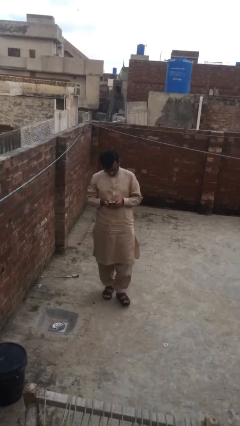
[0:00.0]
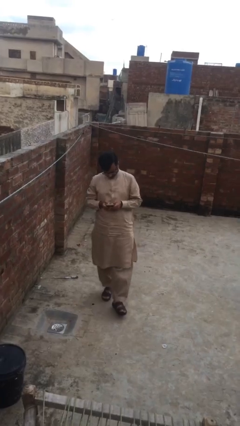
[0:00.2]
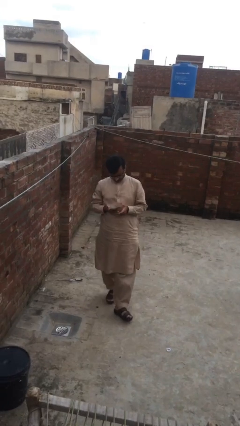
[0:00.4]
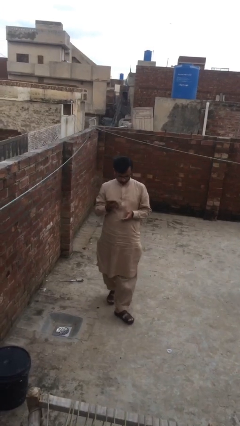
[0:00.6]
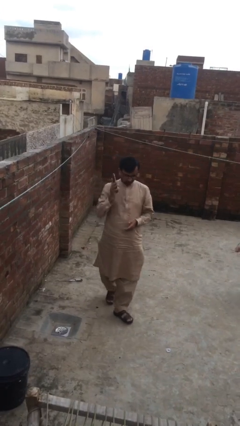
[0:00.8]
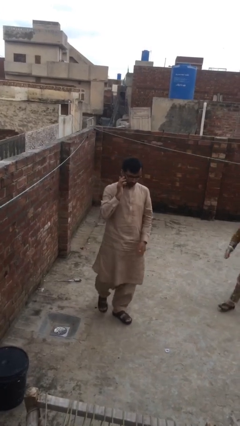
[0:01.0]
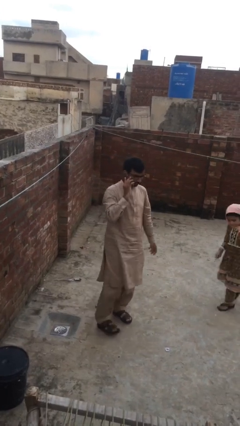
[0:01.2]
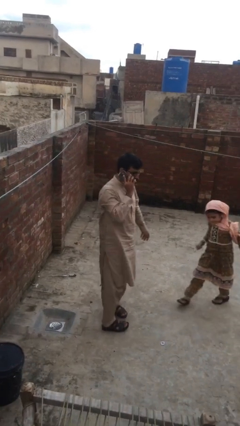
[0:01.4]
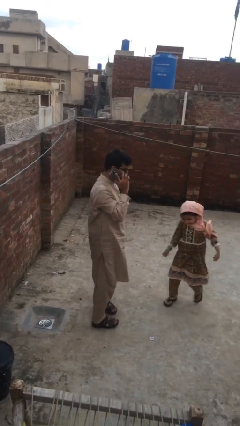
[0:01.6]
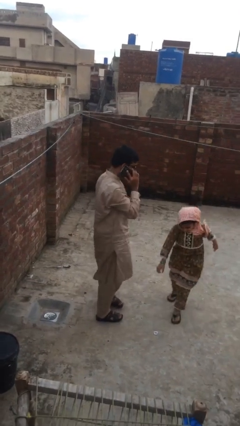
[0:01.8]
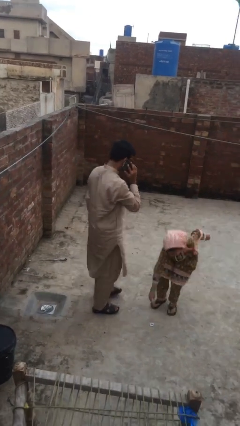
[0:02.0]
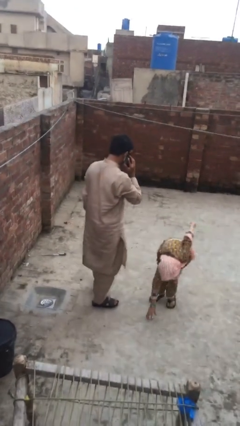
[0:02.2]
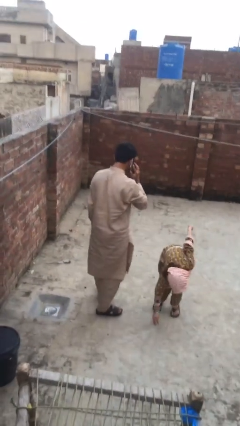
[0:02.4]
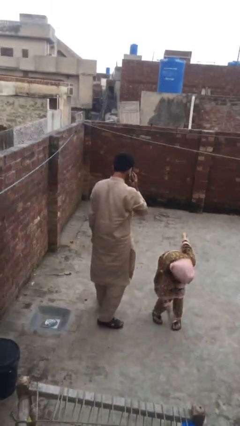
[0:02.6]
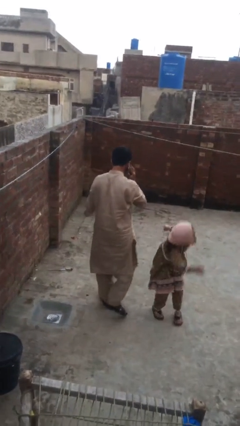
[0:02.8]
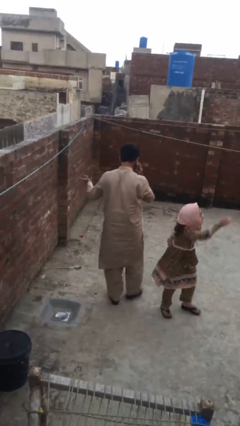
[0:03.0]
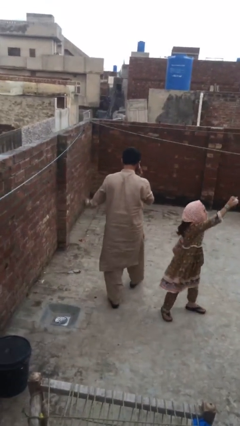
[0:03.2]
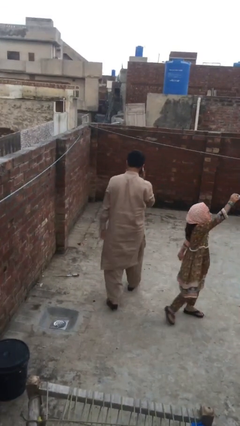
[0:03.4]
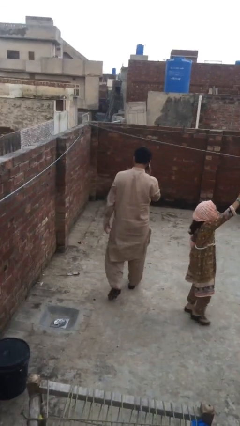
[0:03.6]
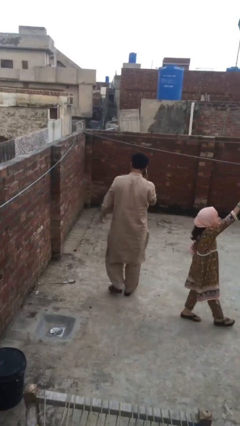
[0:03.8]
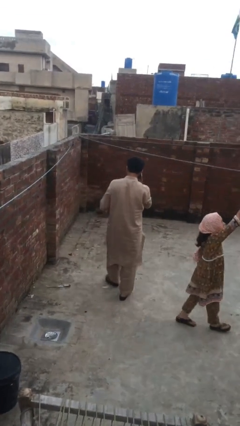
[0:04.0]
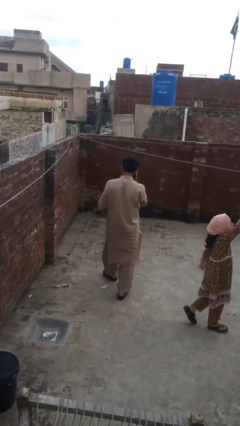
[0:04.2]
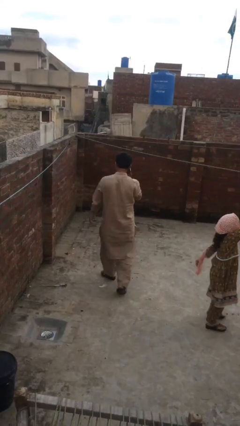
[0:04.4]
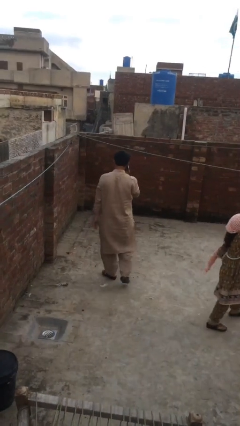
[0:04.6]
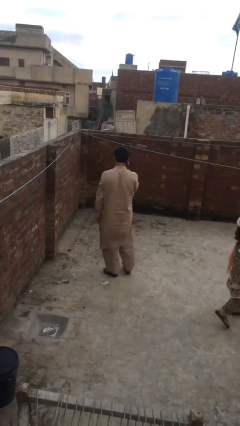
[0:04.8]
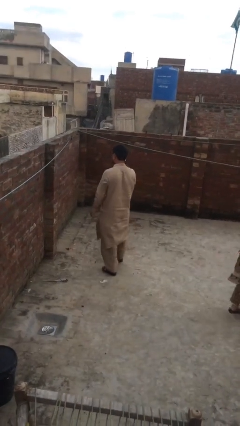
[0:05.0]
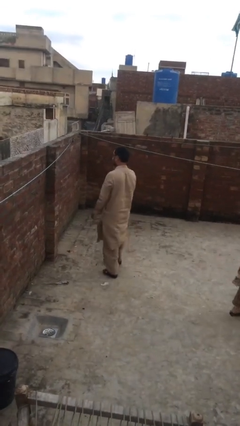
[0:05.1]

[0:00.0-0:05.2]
person talks on phone

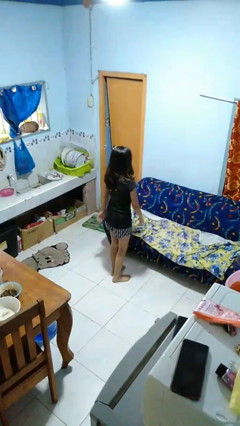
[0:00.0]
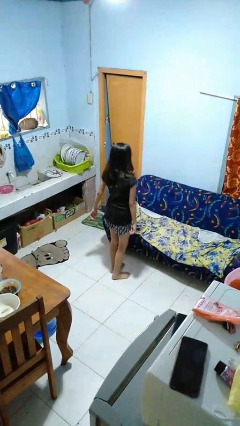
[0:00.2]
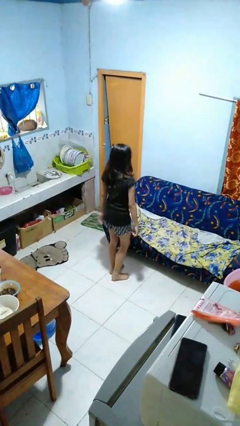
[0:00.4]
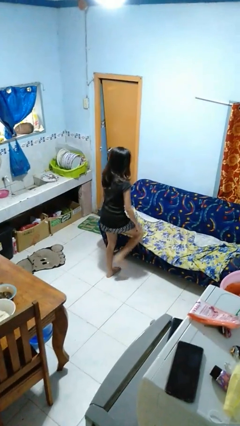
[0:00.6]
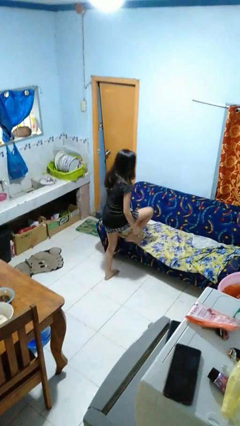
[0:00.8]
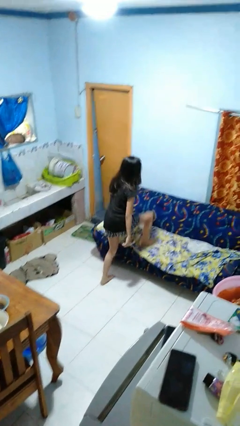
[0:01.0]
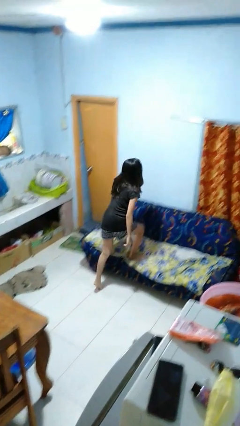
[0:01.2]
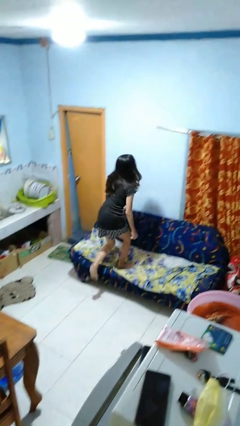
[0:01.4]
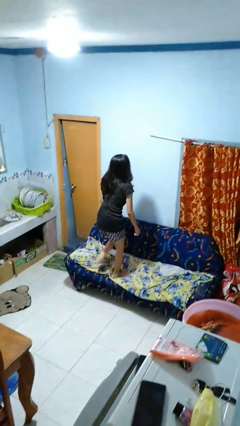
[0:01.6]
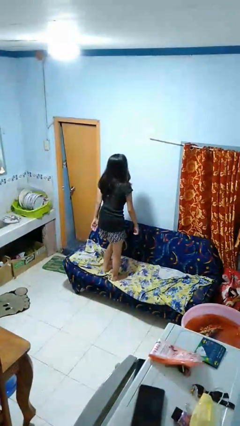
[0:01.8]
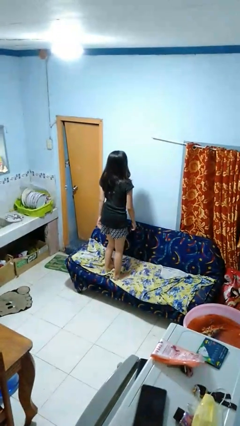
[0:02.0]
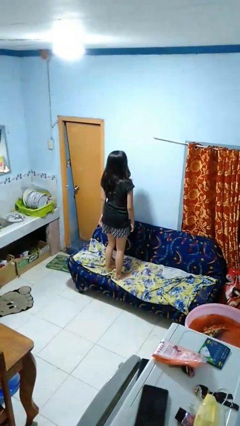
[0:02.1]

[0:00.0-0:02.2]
person climbs on couch

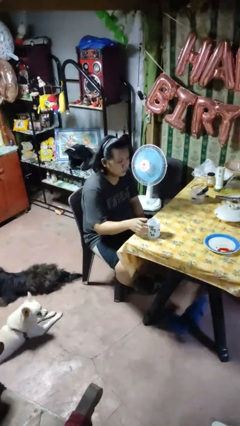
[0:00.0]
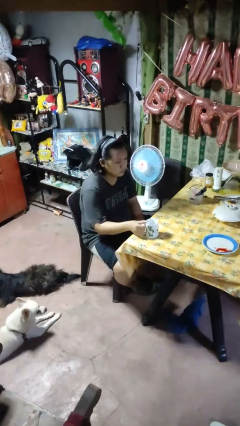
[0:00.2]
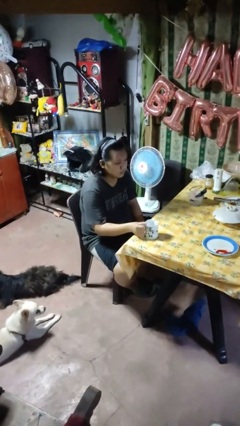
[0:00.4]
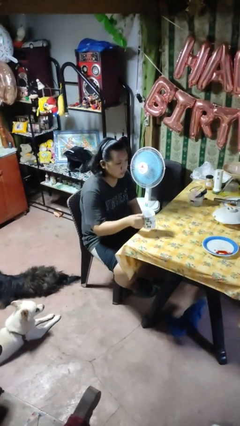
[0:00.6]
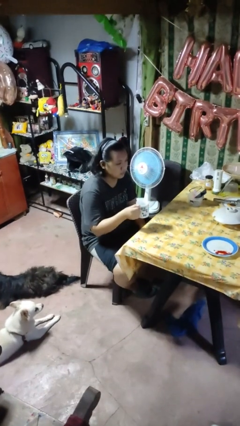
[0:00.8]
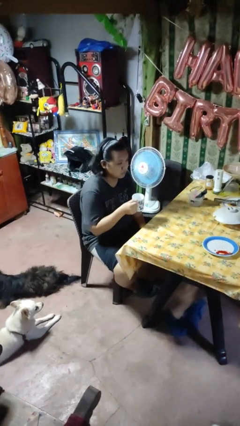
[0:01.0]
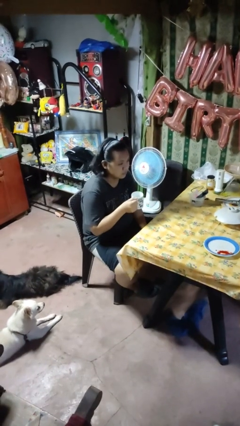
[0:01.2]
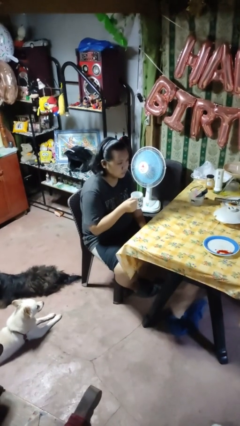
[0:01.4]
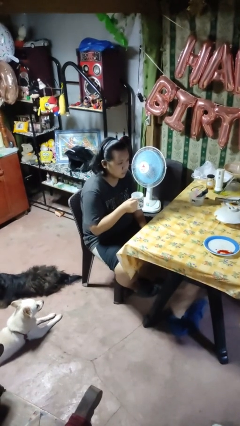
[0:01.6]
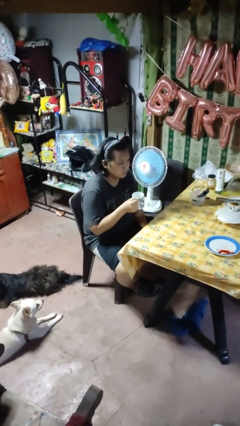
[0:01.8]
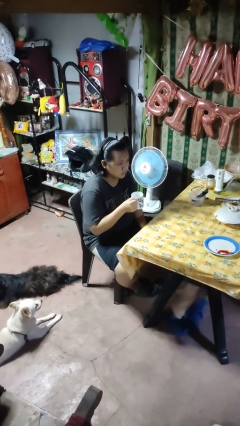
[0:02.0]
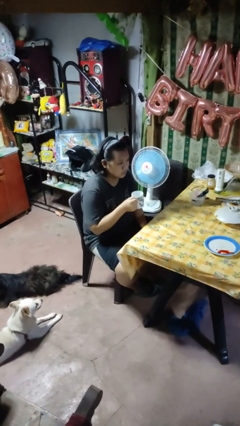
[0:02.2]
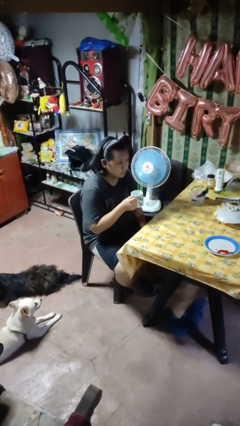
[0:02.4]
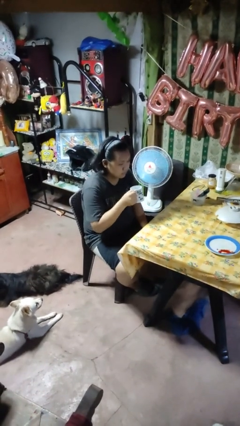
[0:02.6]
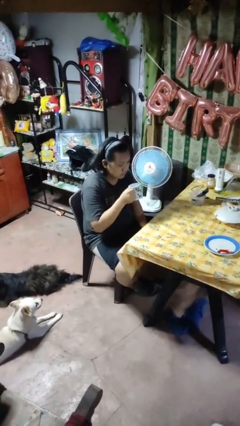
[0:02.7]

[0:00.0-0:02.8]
person picks up object from table

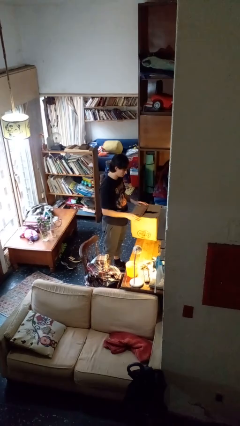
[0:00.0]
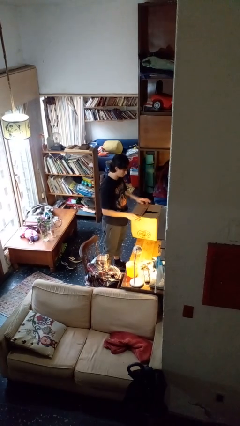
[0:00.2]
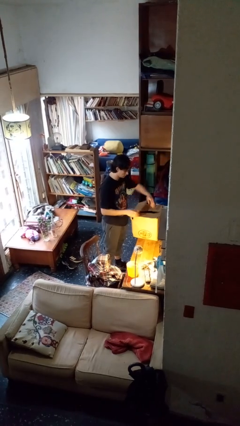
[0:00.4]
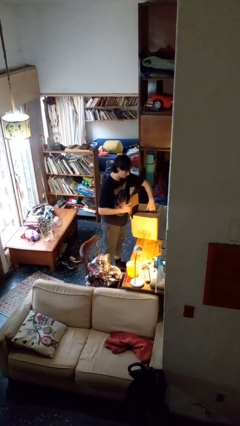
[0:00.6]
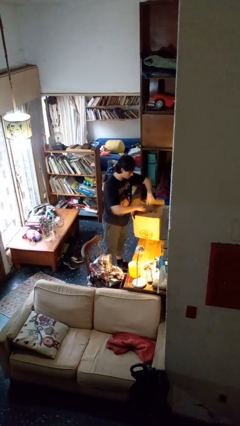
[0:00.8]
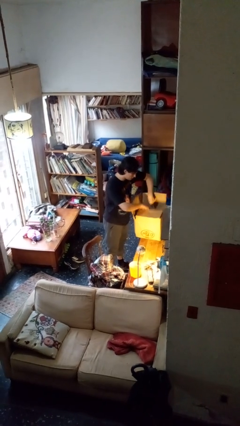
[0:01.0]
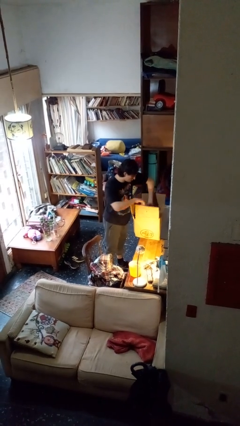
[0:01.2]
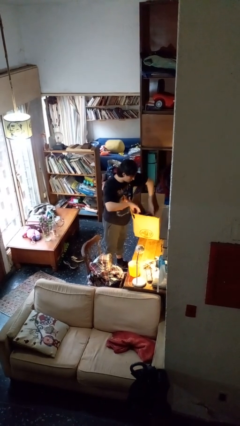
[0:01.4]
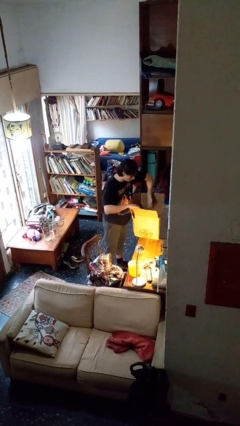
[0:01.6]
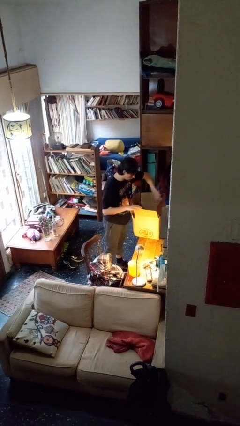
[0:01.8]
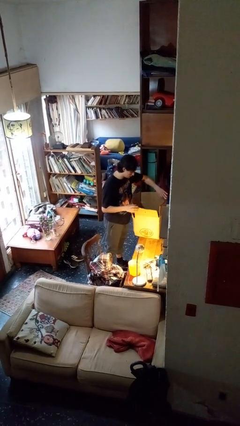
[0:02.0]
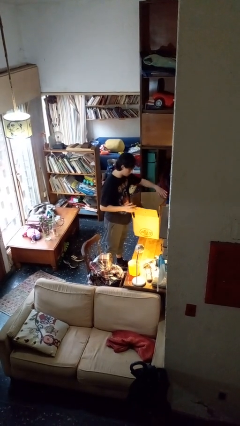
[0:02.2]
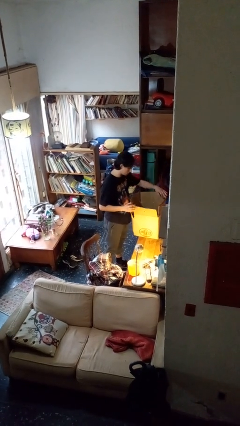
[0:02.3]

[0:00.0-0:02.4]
person opens box

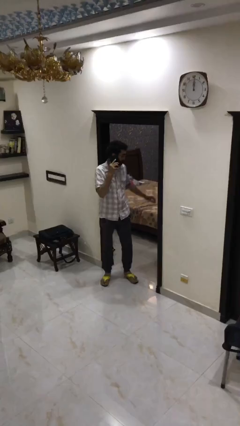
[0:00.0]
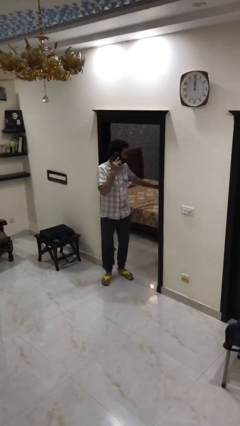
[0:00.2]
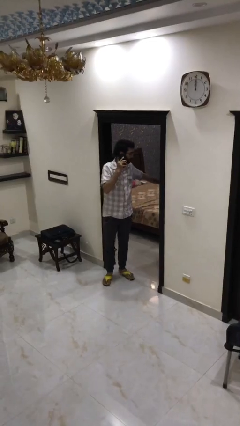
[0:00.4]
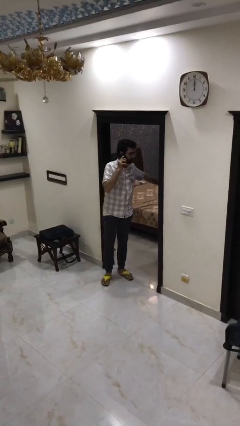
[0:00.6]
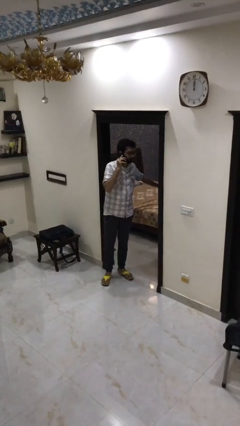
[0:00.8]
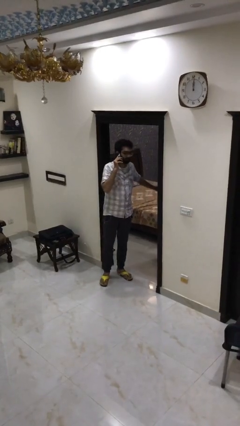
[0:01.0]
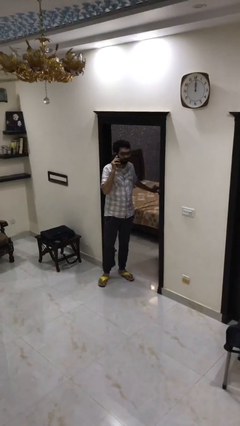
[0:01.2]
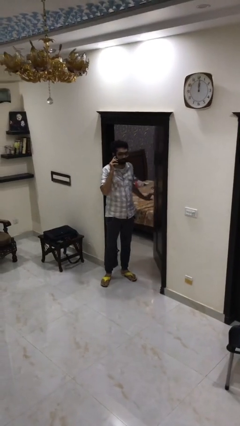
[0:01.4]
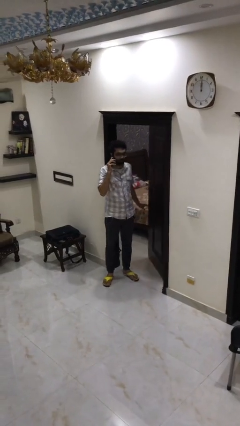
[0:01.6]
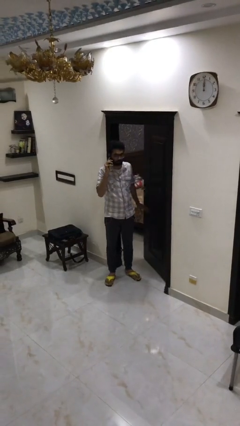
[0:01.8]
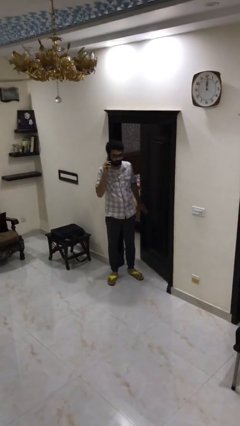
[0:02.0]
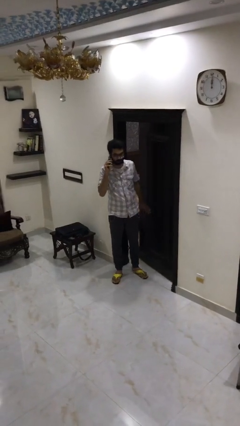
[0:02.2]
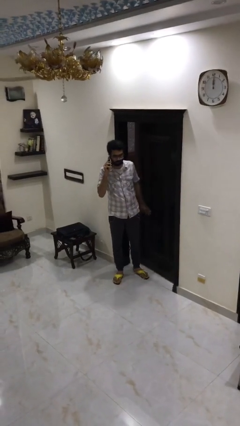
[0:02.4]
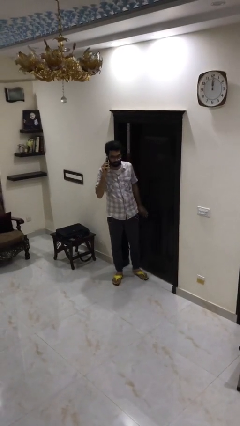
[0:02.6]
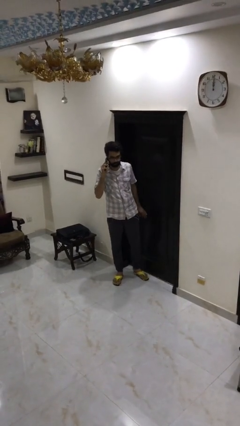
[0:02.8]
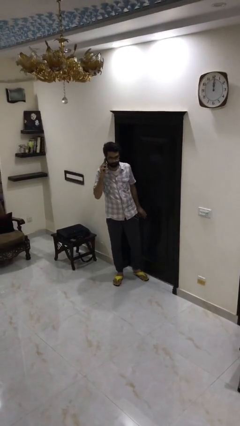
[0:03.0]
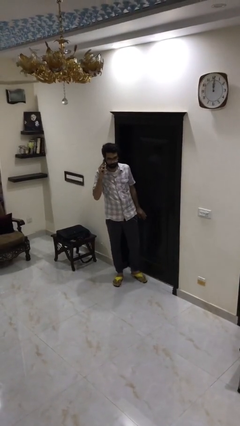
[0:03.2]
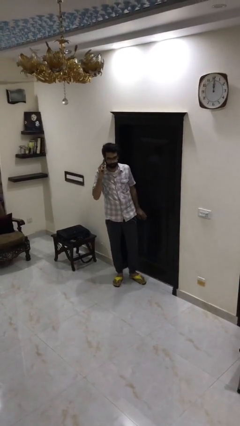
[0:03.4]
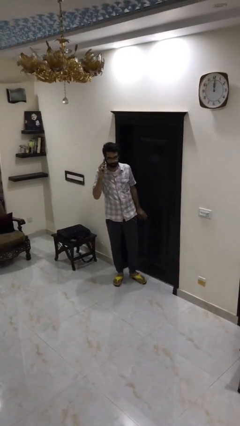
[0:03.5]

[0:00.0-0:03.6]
person closes facility door

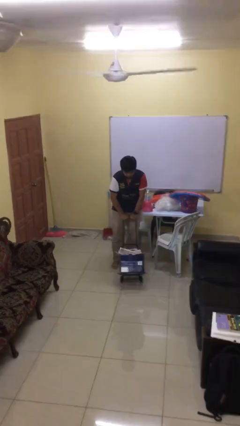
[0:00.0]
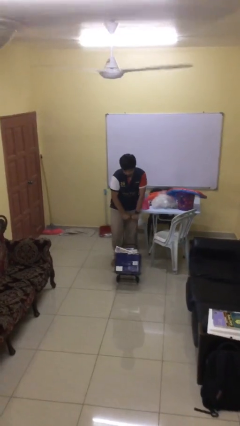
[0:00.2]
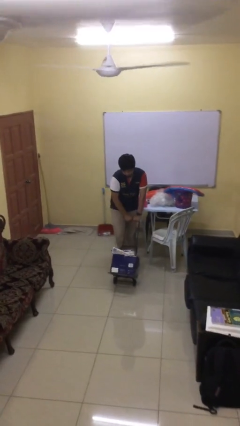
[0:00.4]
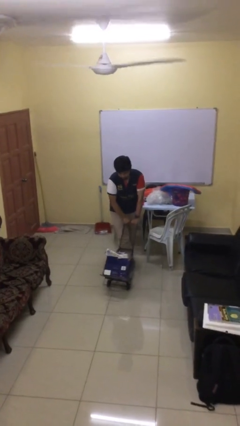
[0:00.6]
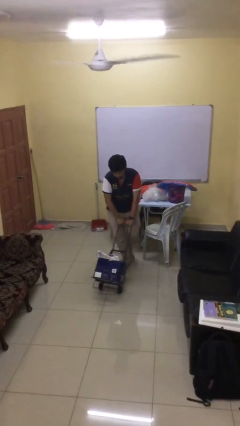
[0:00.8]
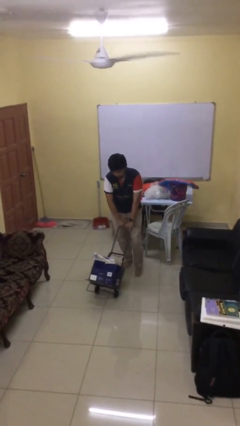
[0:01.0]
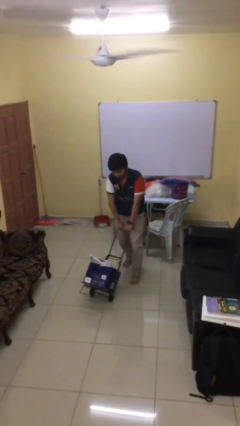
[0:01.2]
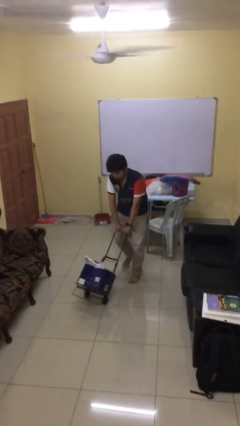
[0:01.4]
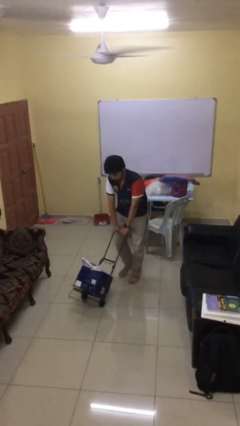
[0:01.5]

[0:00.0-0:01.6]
person pushes wheeled cart
